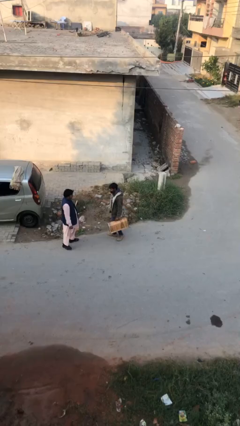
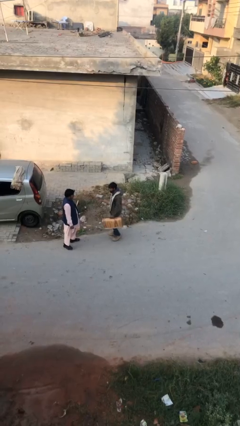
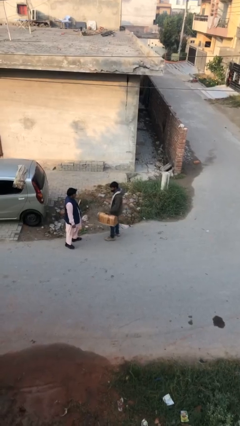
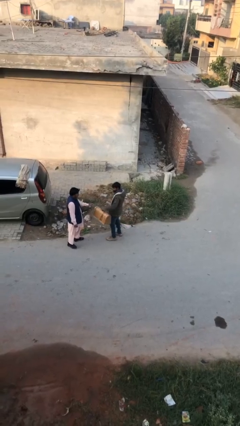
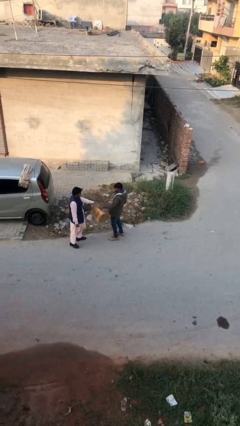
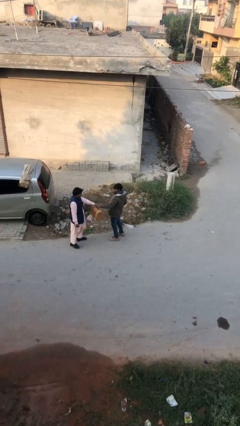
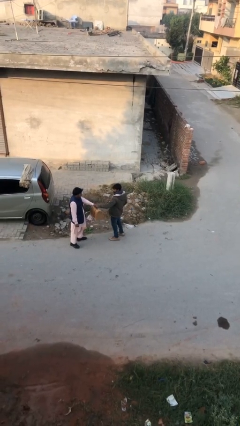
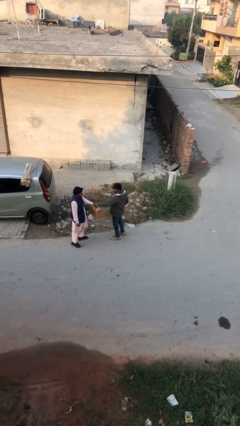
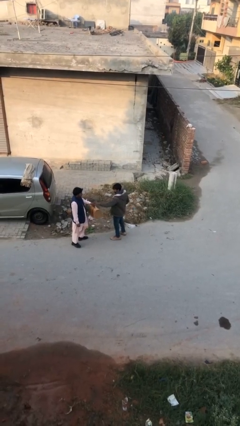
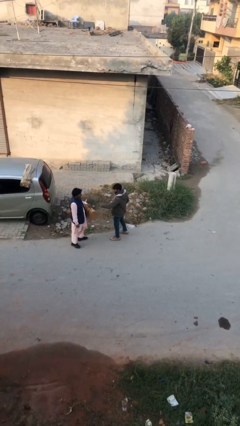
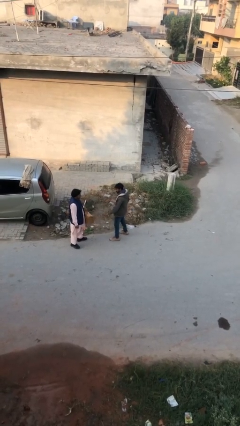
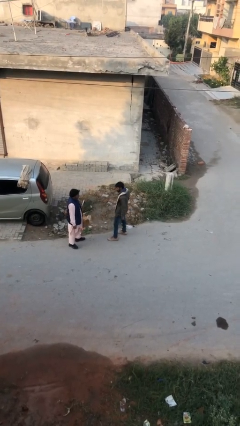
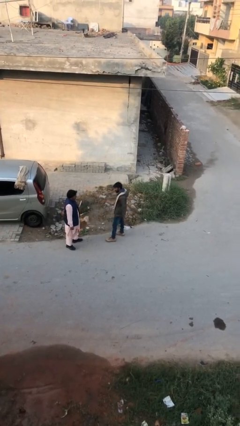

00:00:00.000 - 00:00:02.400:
person transfers object to person

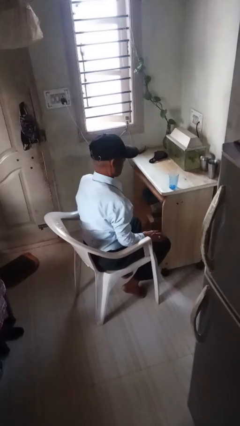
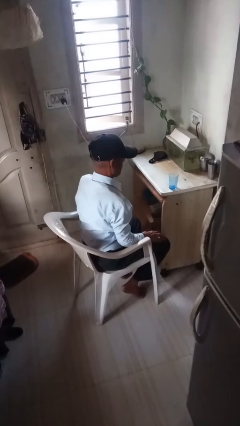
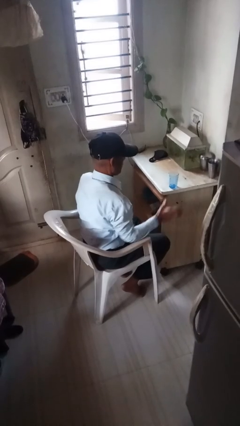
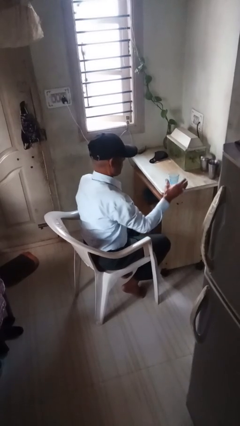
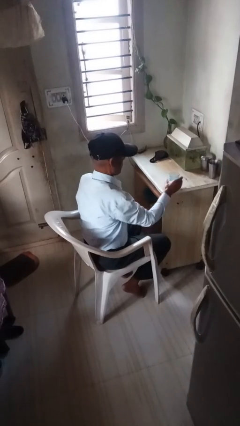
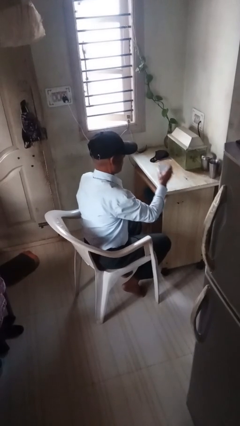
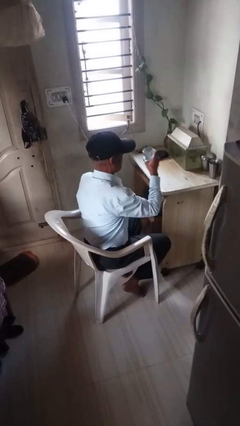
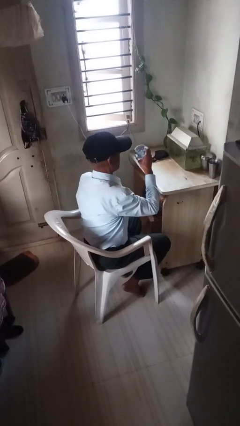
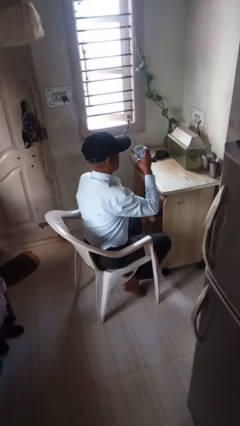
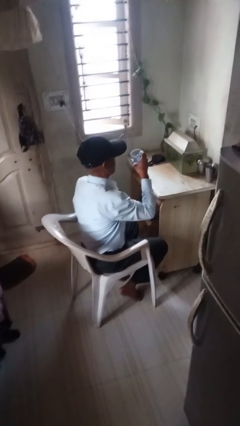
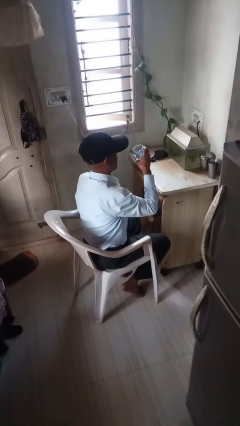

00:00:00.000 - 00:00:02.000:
person picks up object from table

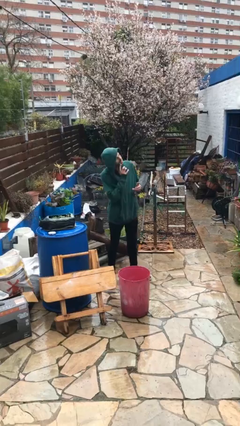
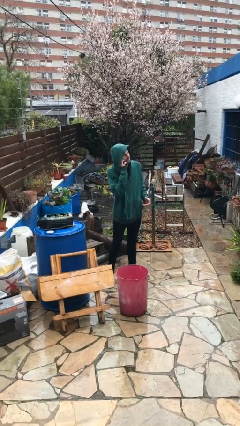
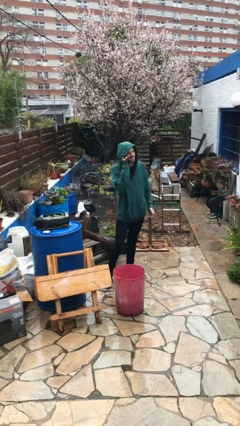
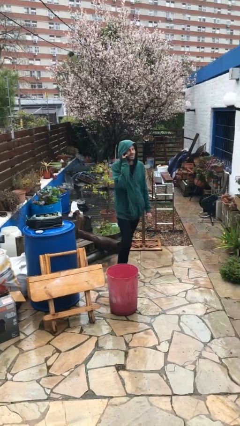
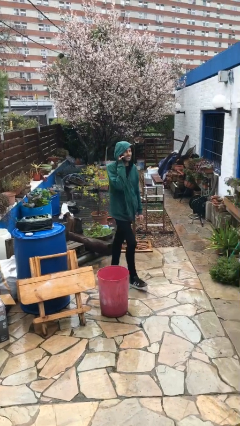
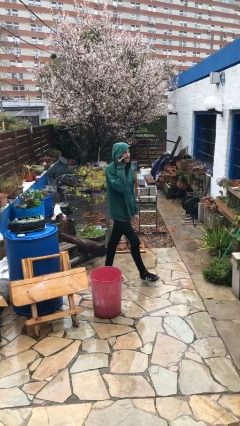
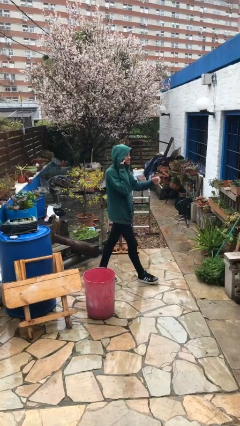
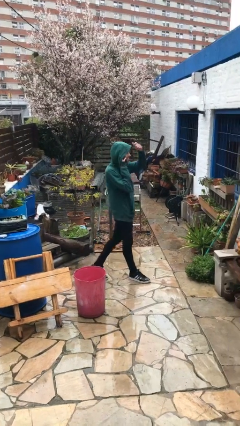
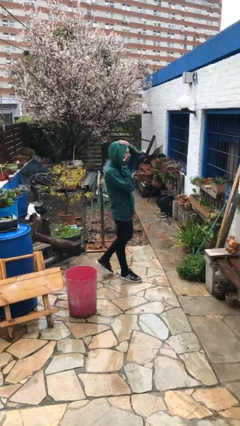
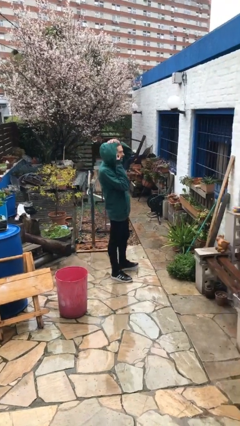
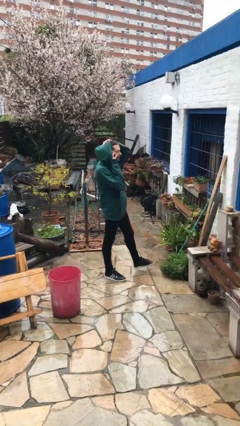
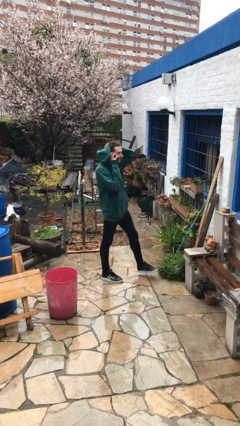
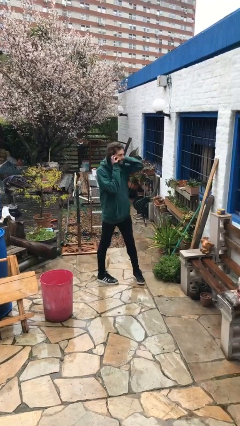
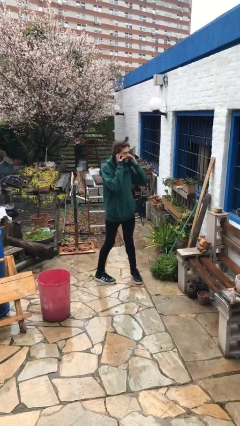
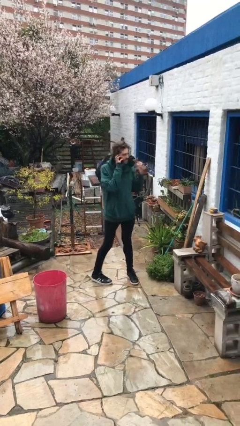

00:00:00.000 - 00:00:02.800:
person talks on phone

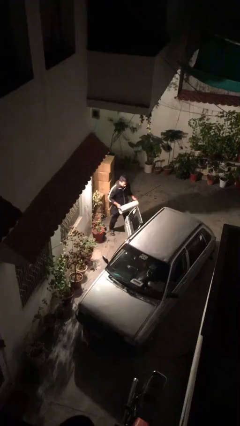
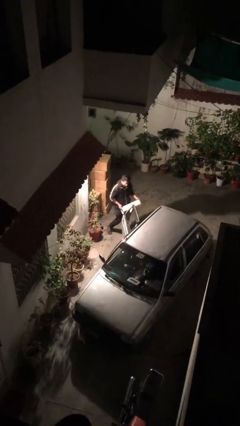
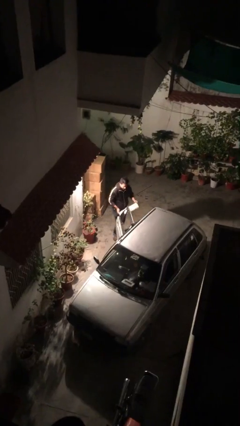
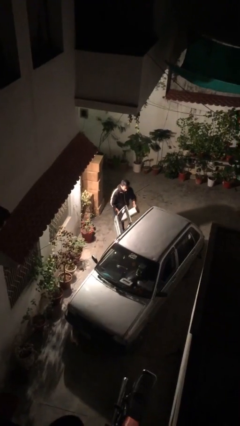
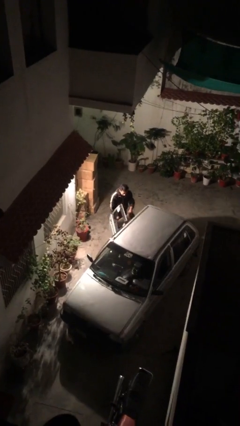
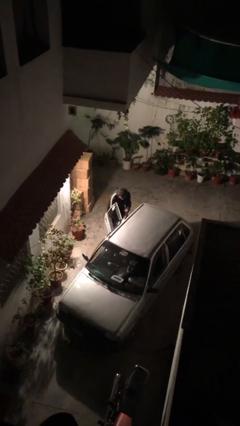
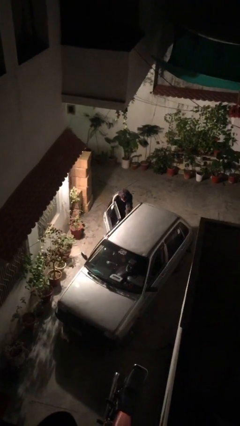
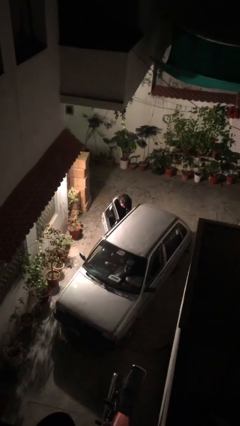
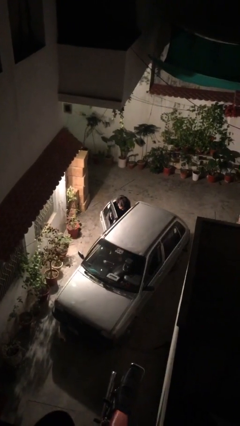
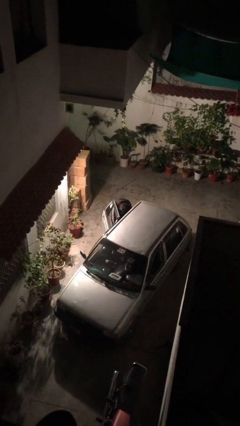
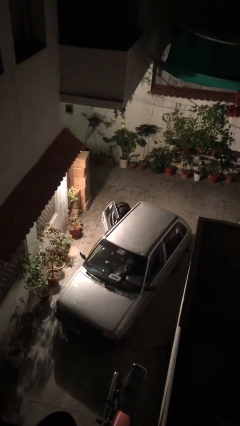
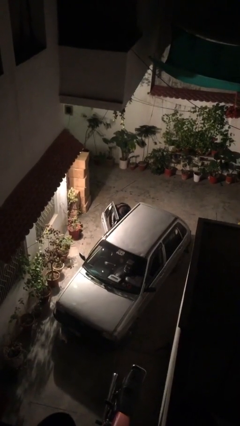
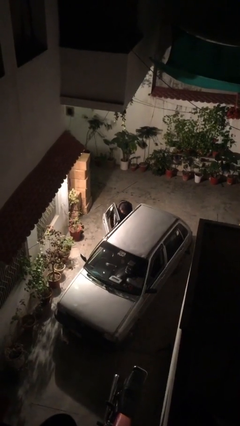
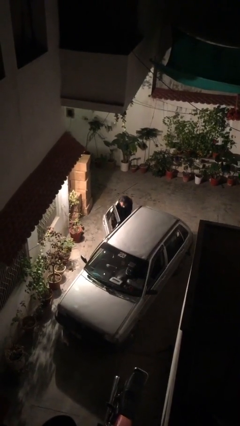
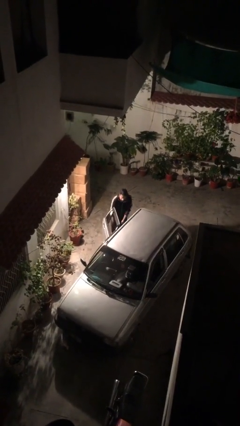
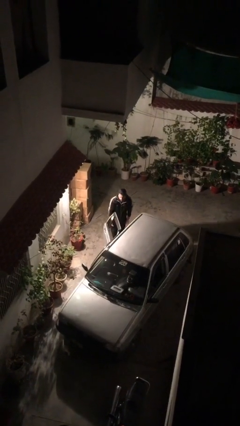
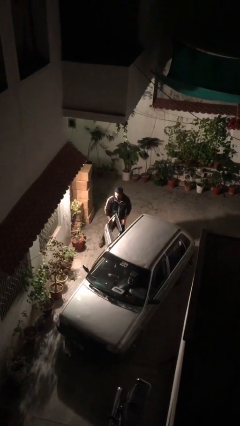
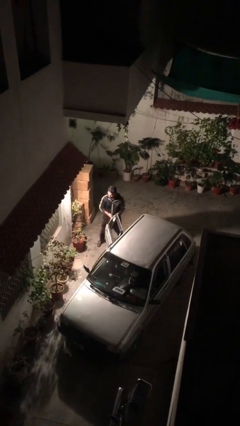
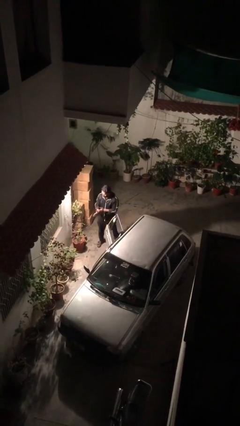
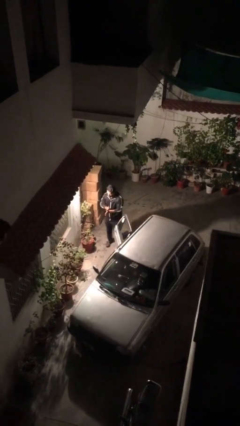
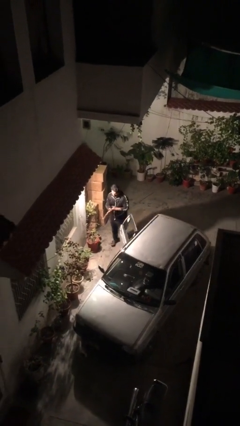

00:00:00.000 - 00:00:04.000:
person loads car

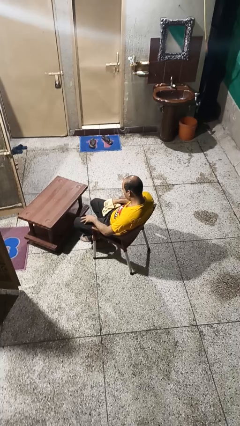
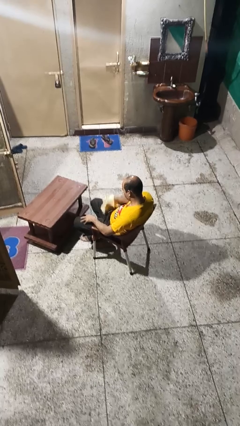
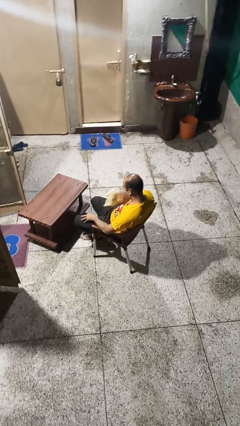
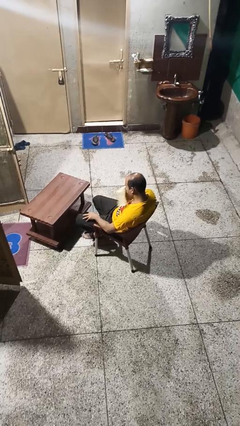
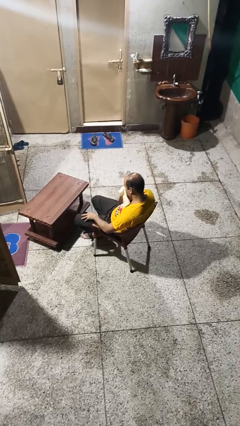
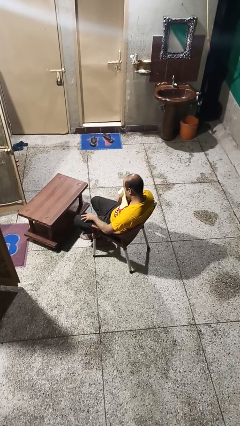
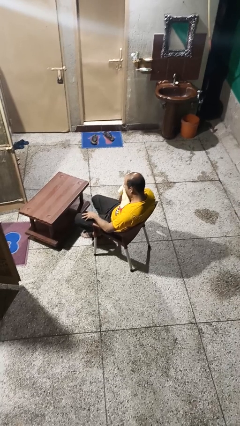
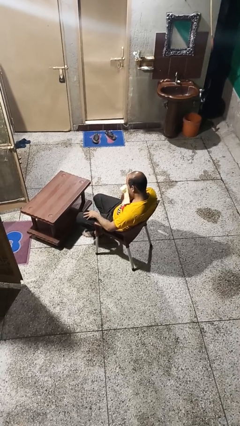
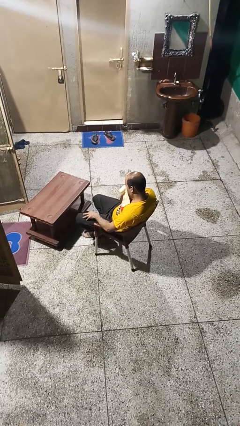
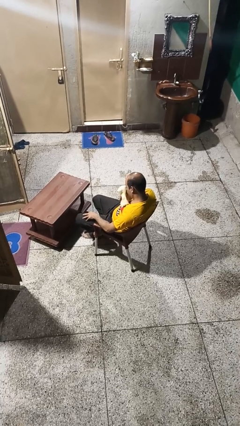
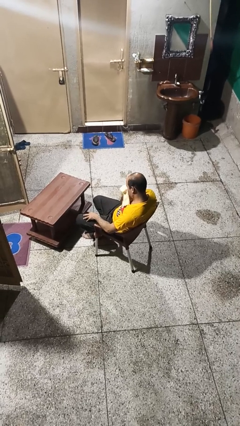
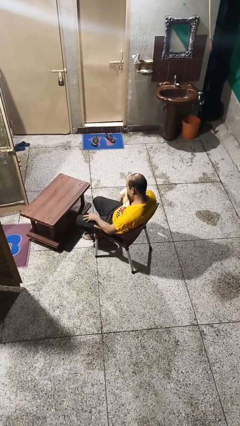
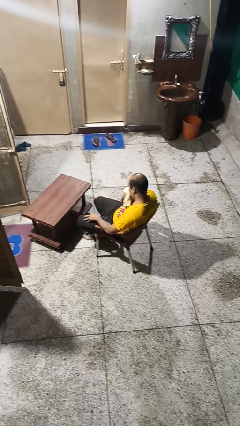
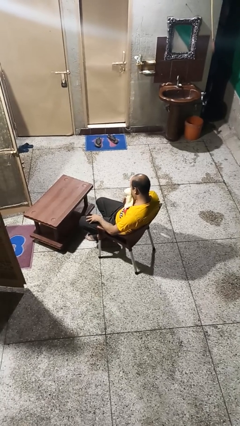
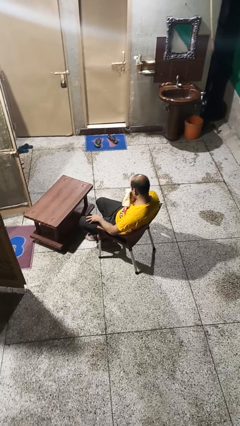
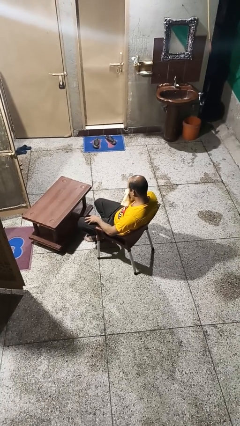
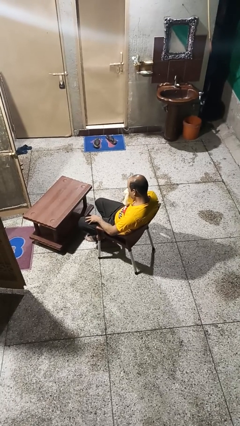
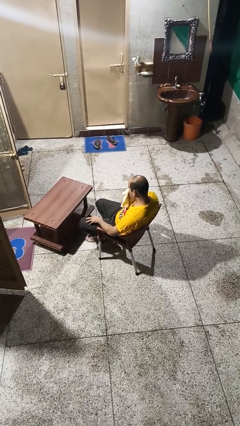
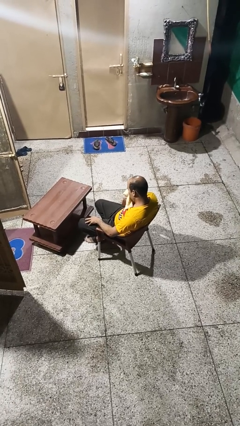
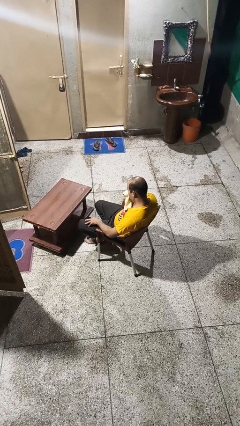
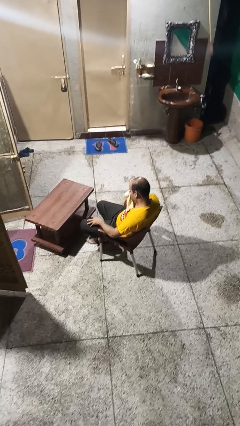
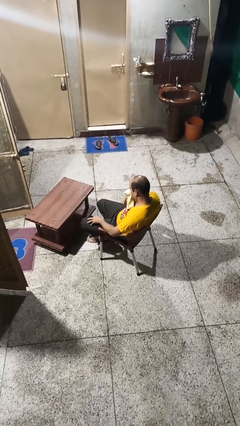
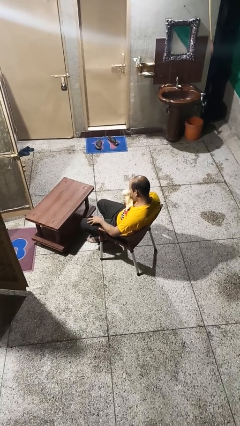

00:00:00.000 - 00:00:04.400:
person blows nose

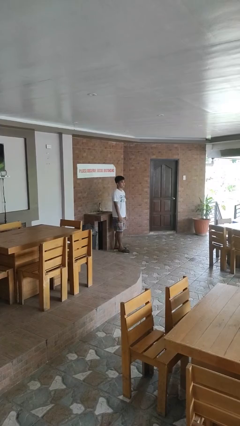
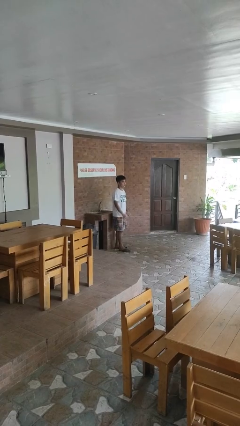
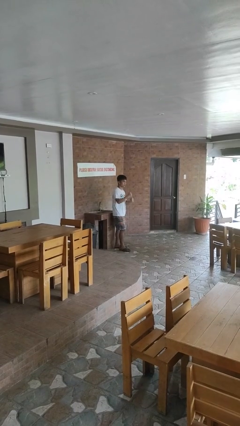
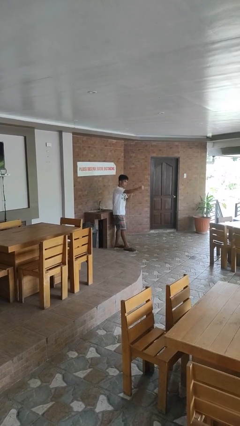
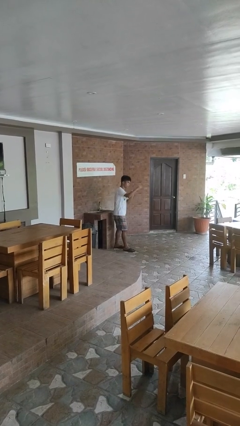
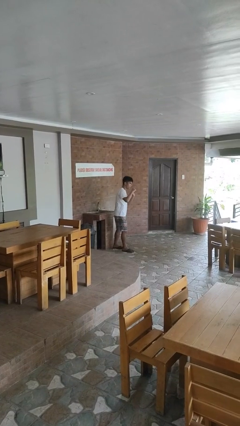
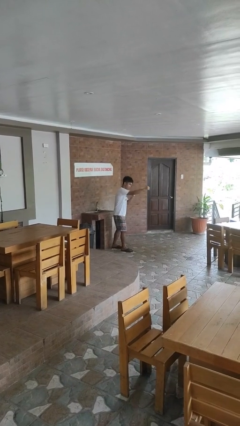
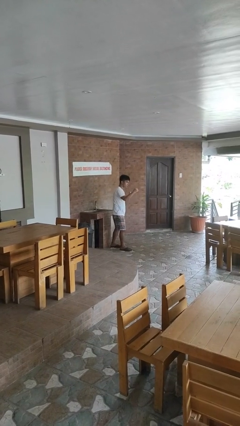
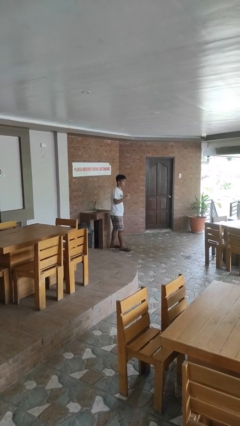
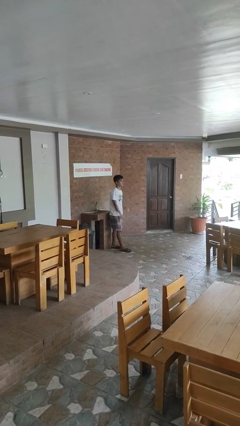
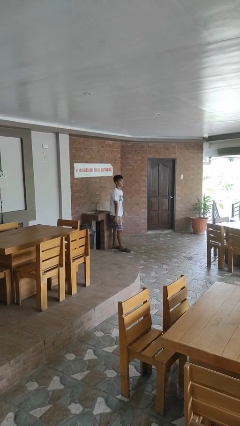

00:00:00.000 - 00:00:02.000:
person punches
